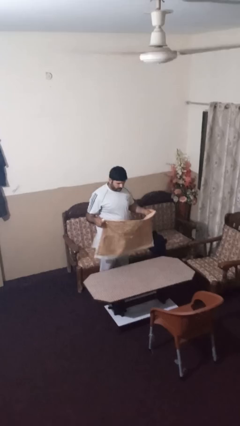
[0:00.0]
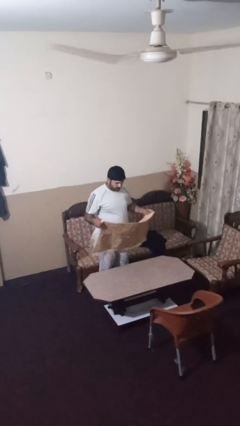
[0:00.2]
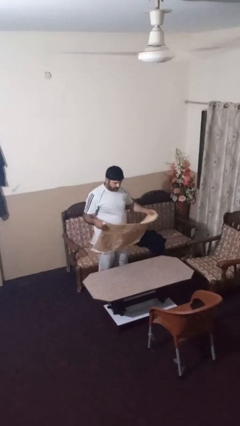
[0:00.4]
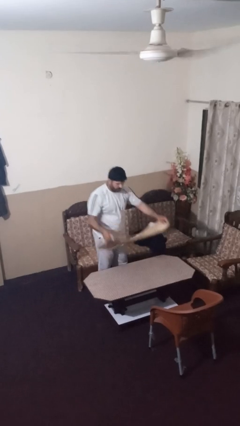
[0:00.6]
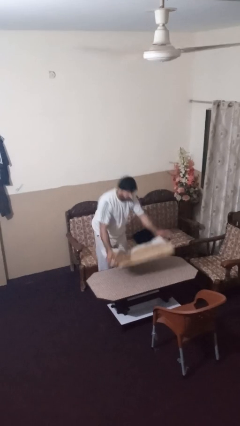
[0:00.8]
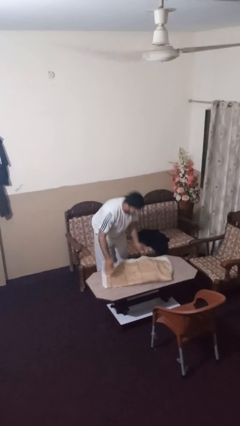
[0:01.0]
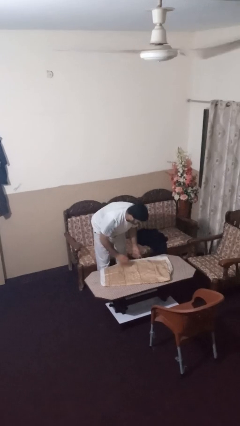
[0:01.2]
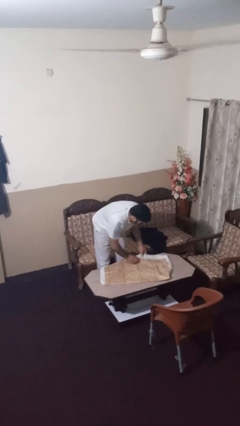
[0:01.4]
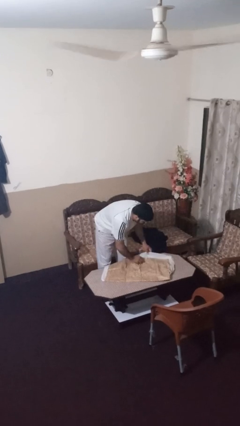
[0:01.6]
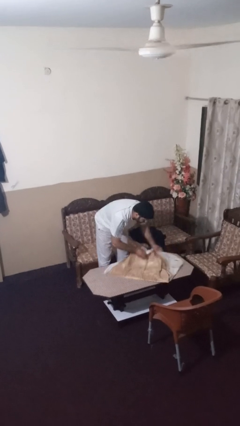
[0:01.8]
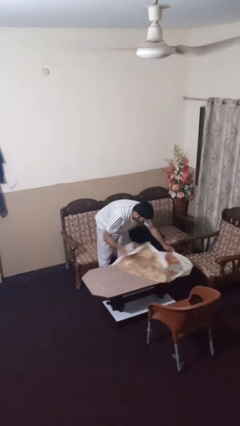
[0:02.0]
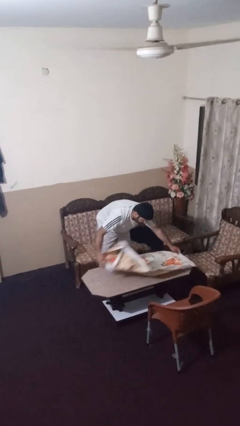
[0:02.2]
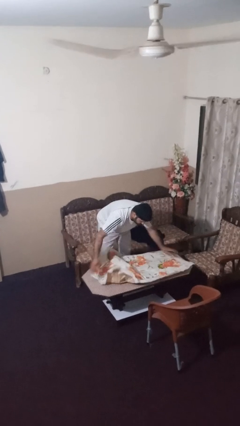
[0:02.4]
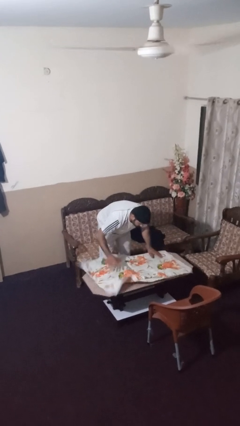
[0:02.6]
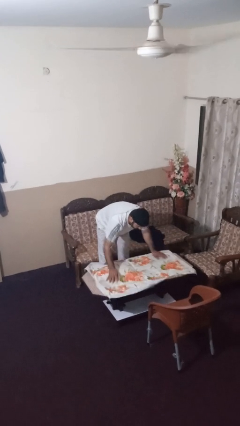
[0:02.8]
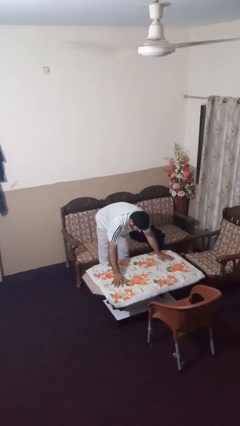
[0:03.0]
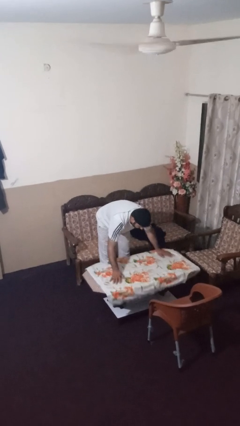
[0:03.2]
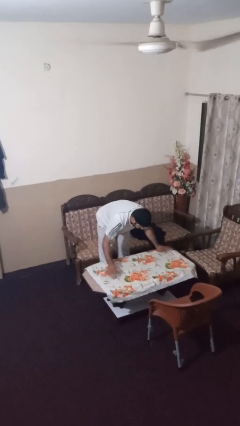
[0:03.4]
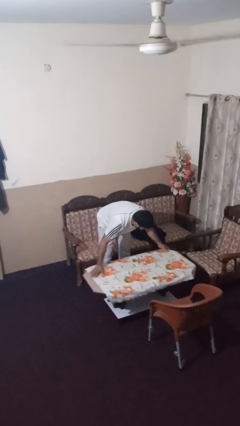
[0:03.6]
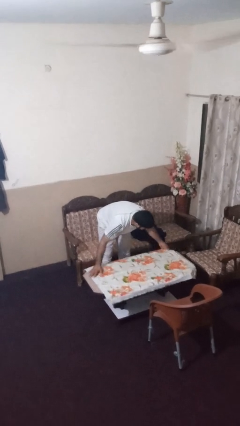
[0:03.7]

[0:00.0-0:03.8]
person spreads tablecloth

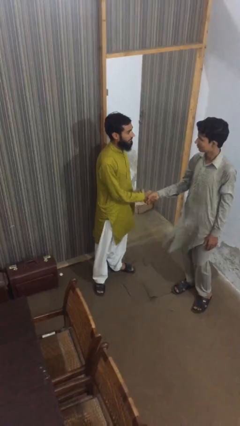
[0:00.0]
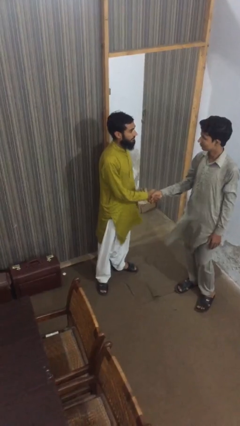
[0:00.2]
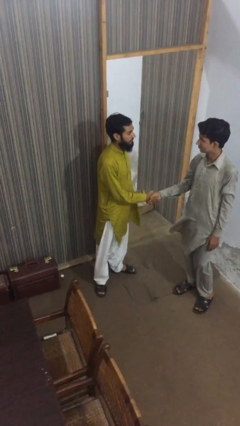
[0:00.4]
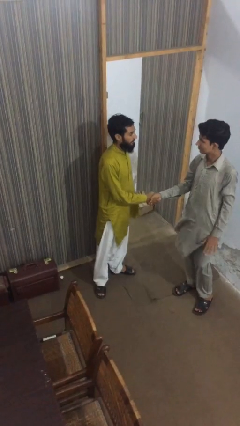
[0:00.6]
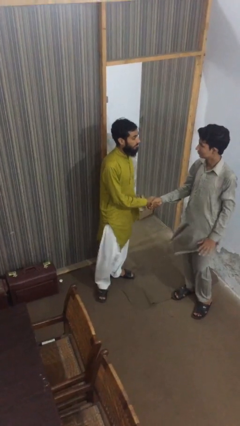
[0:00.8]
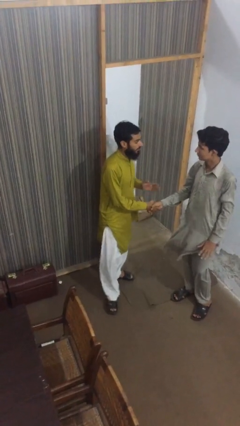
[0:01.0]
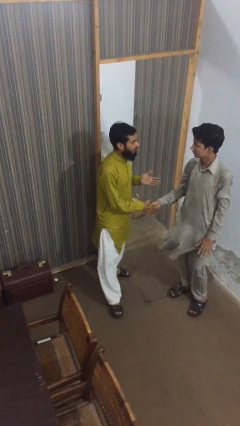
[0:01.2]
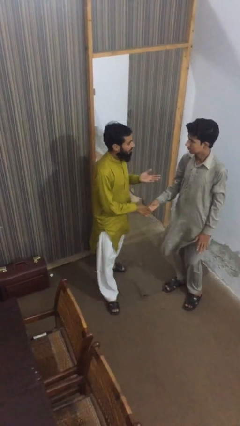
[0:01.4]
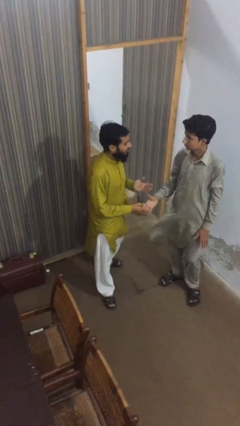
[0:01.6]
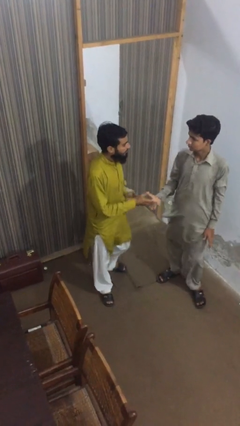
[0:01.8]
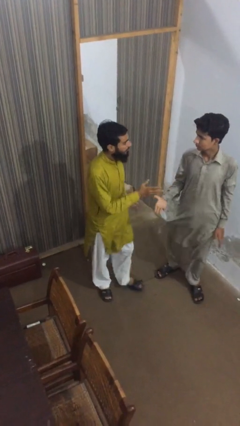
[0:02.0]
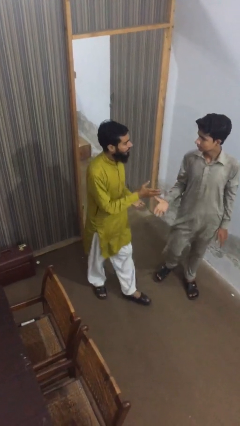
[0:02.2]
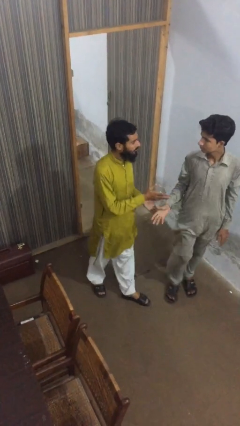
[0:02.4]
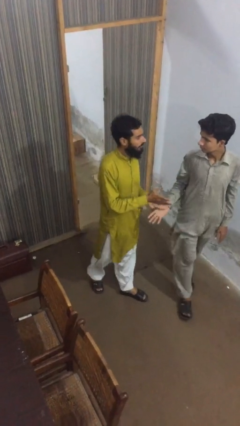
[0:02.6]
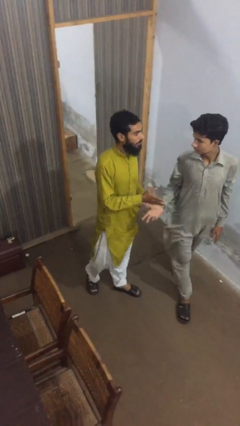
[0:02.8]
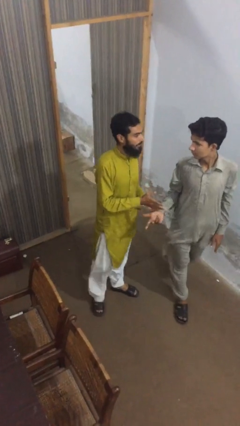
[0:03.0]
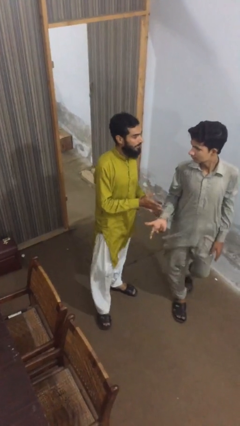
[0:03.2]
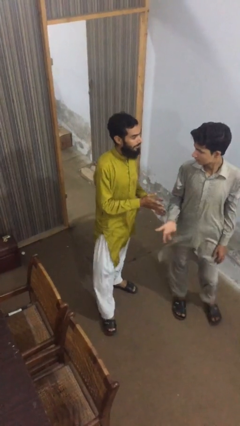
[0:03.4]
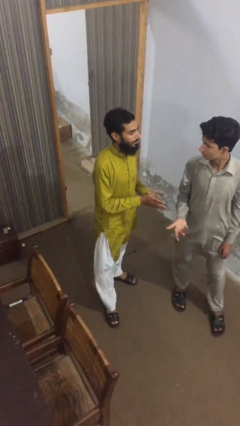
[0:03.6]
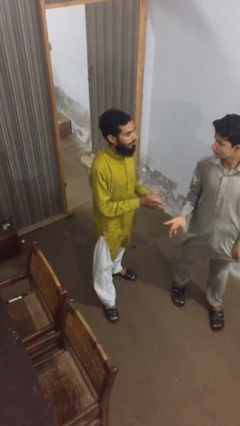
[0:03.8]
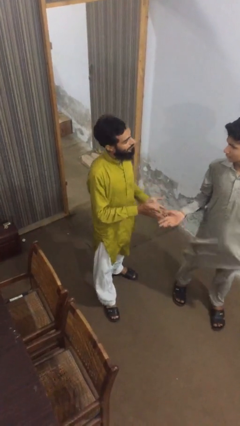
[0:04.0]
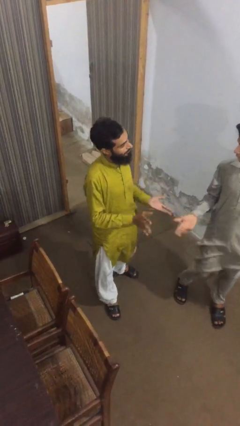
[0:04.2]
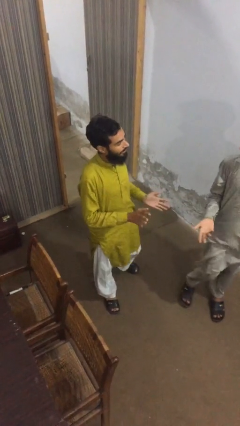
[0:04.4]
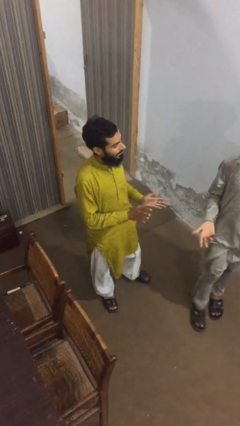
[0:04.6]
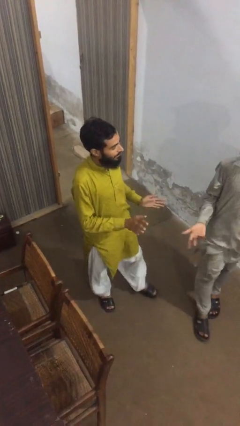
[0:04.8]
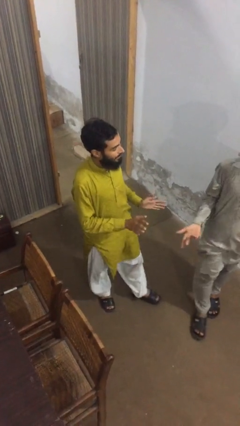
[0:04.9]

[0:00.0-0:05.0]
person talks to person

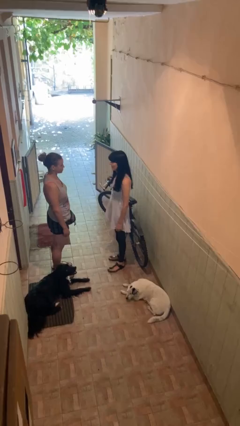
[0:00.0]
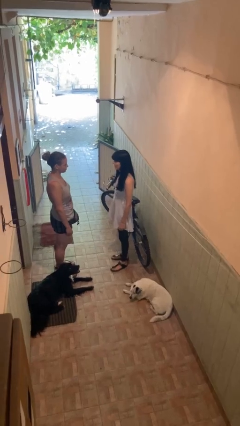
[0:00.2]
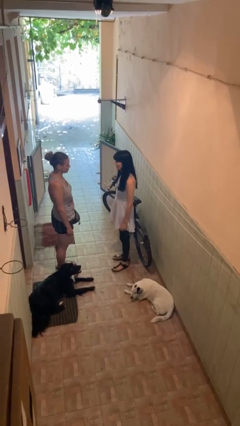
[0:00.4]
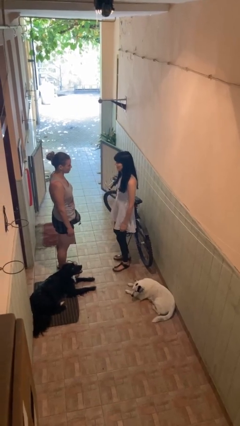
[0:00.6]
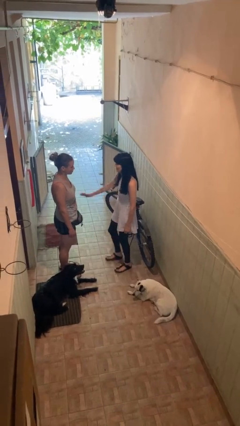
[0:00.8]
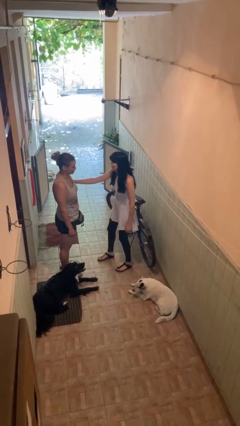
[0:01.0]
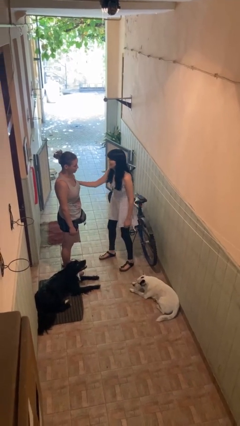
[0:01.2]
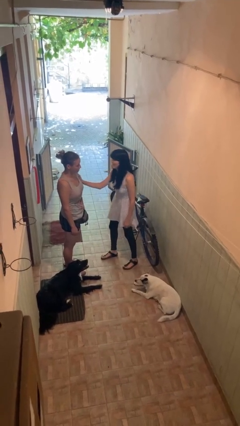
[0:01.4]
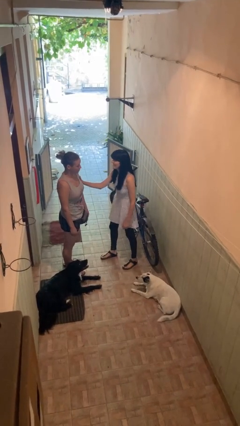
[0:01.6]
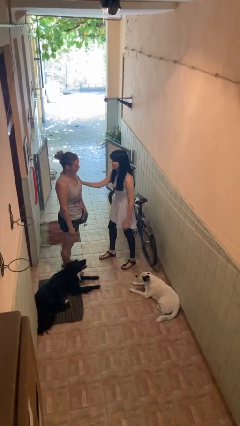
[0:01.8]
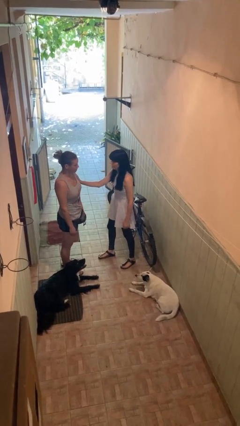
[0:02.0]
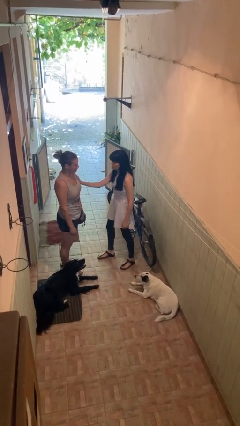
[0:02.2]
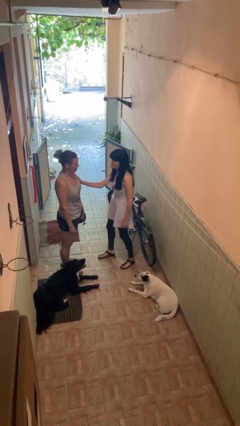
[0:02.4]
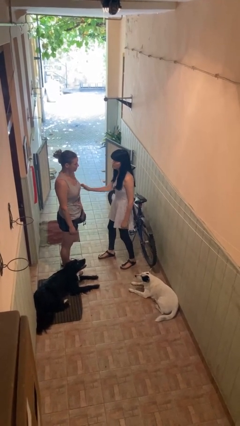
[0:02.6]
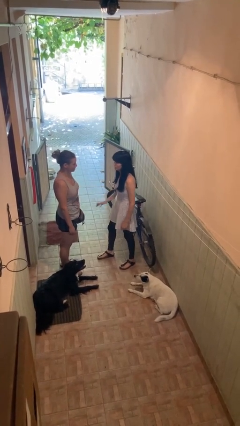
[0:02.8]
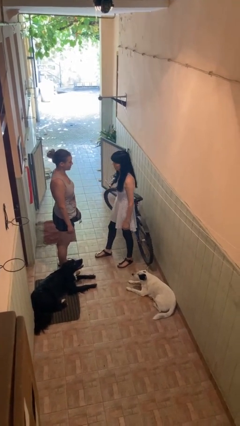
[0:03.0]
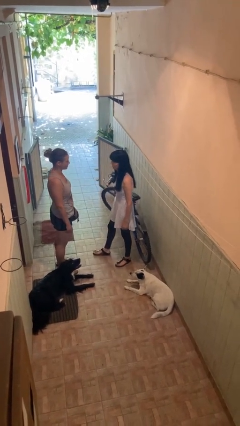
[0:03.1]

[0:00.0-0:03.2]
person grabs person by bicep

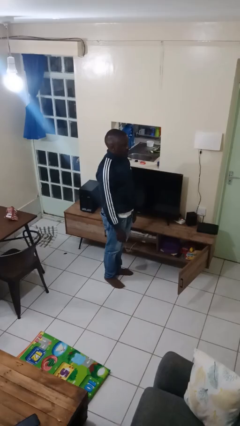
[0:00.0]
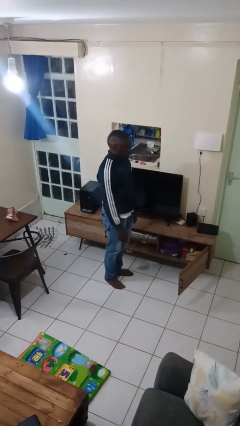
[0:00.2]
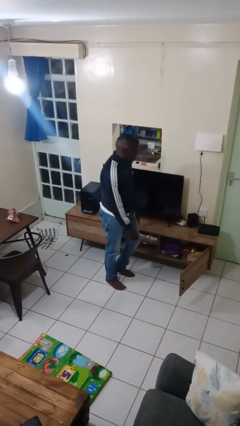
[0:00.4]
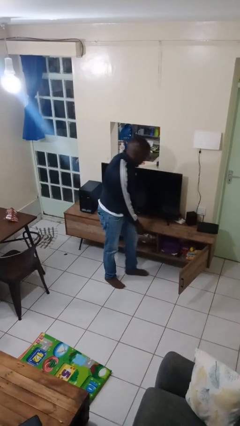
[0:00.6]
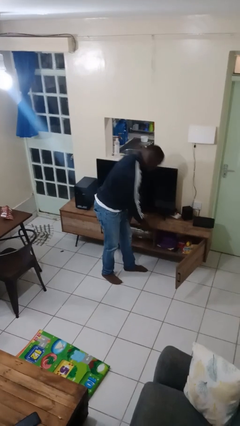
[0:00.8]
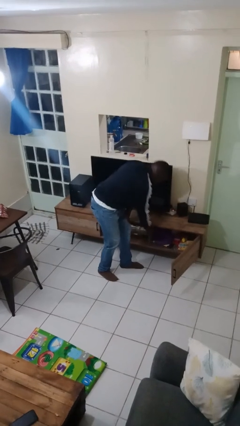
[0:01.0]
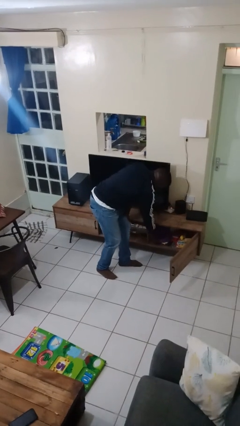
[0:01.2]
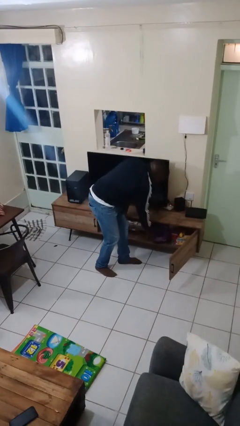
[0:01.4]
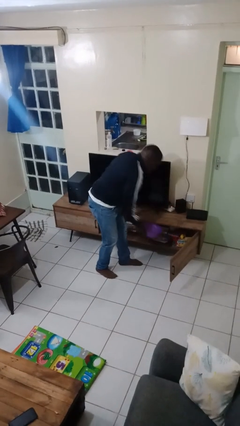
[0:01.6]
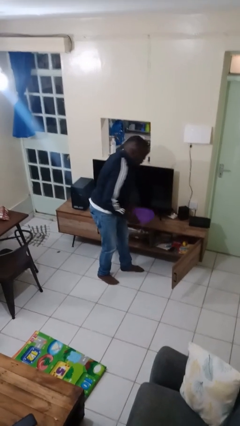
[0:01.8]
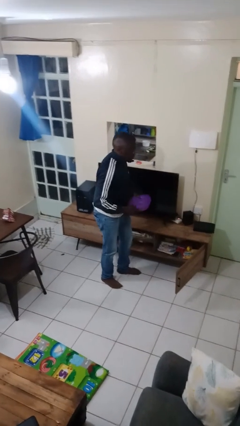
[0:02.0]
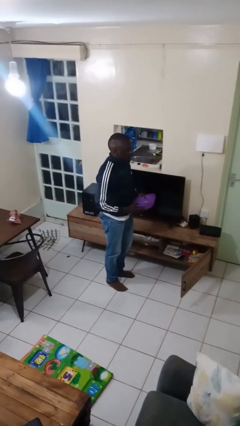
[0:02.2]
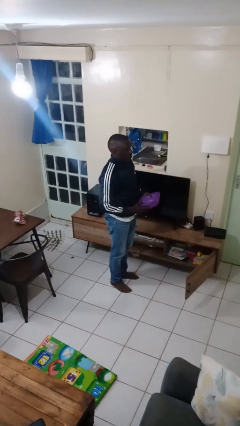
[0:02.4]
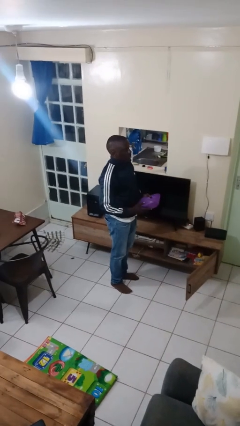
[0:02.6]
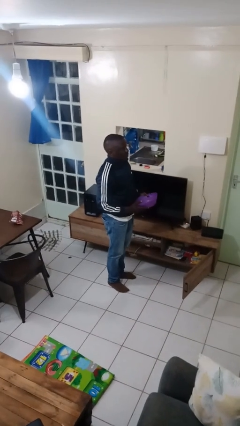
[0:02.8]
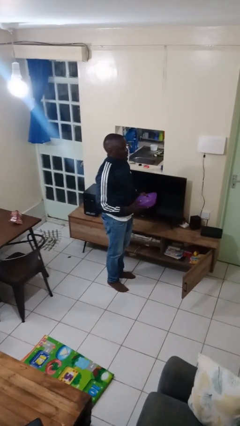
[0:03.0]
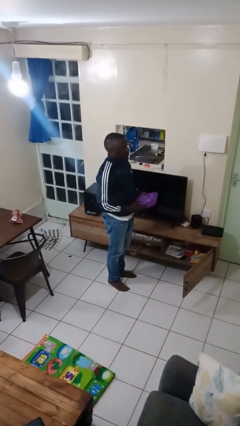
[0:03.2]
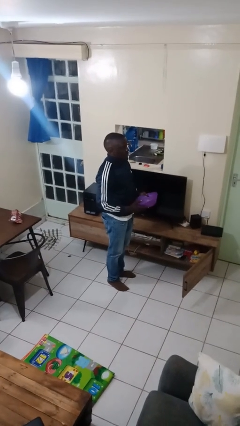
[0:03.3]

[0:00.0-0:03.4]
person picks up object from cabinet

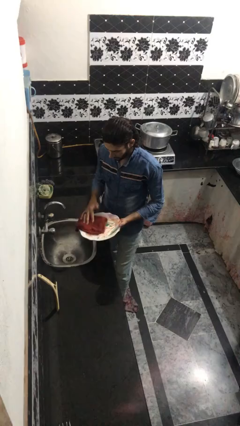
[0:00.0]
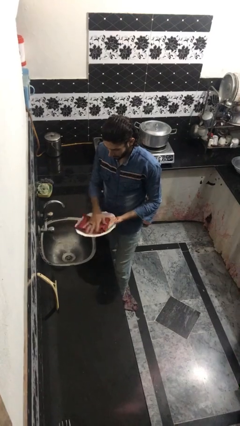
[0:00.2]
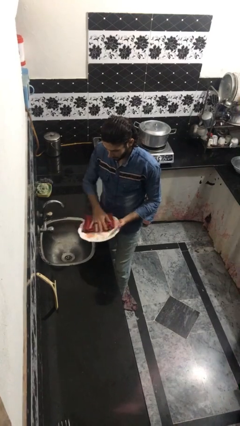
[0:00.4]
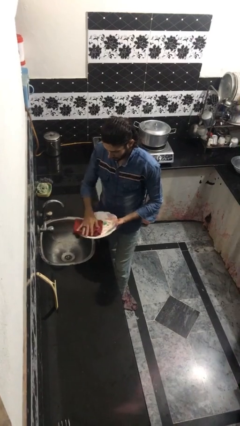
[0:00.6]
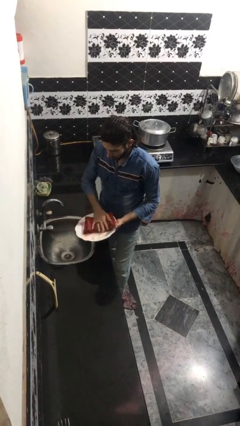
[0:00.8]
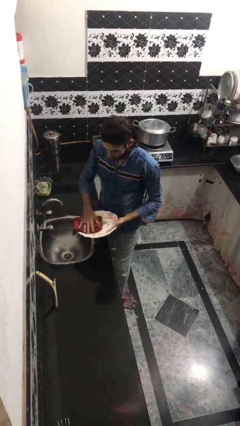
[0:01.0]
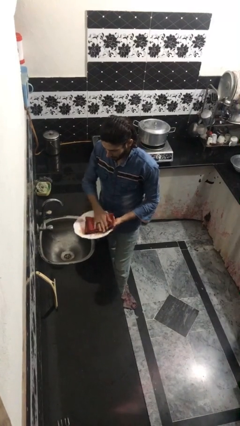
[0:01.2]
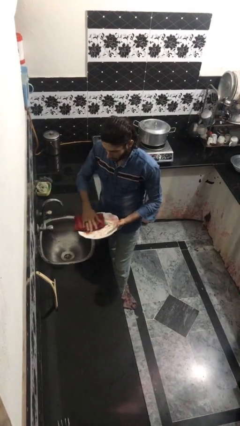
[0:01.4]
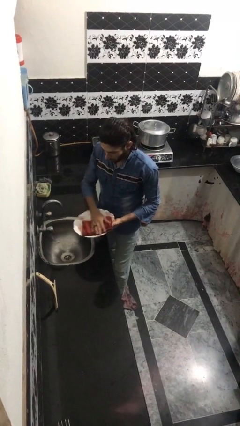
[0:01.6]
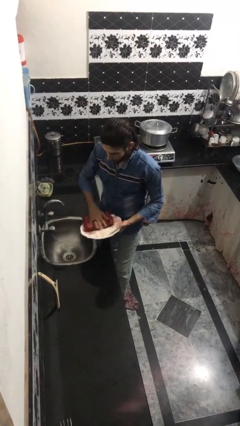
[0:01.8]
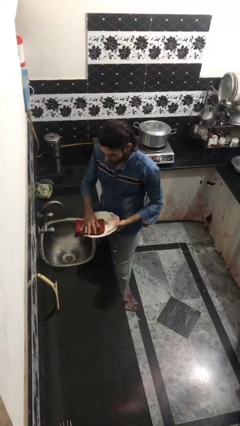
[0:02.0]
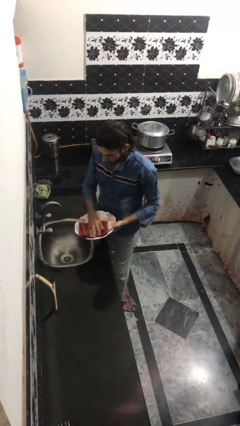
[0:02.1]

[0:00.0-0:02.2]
person dries dish
